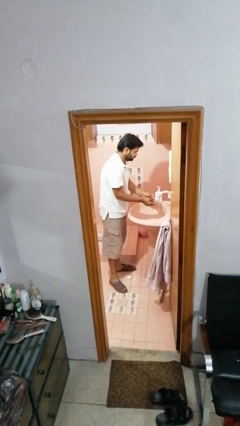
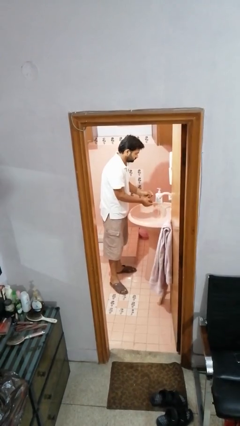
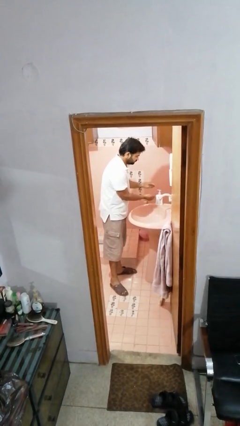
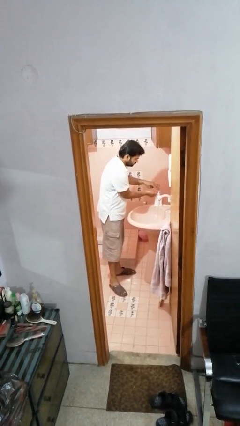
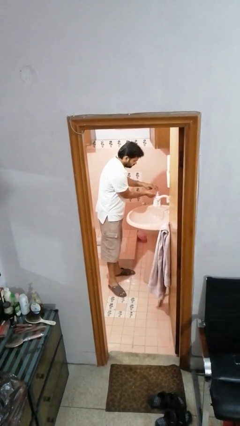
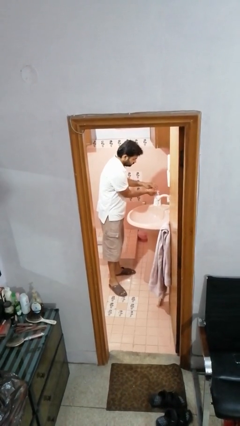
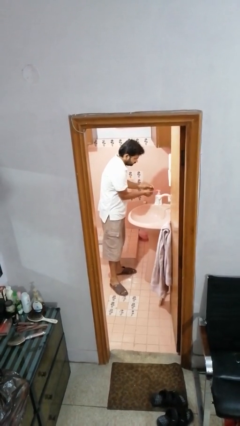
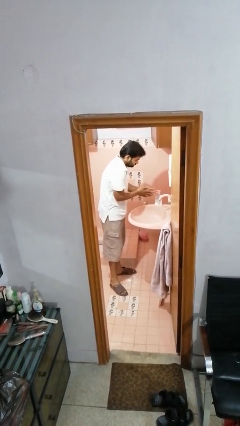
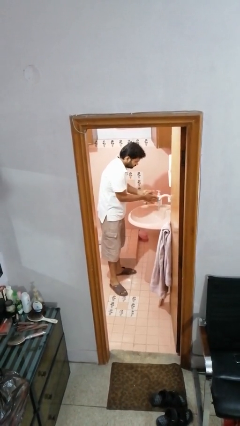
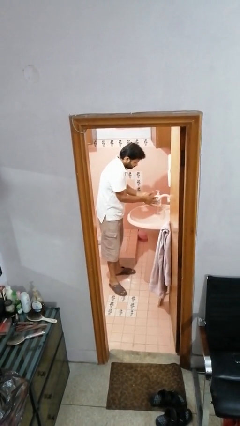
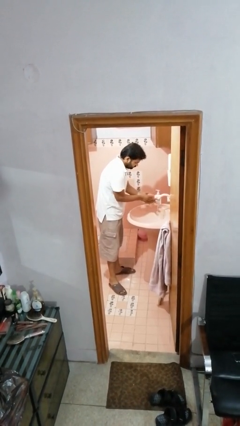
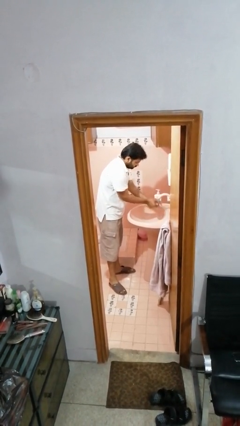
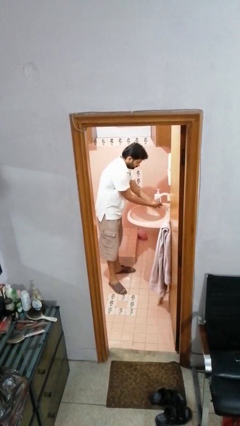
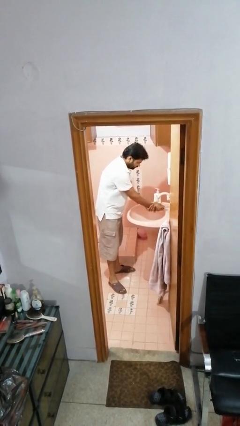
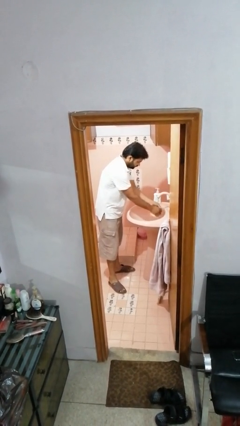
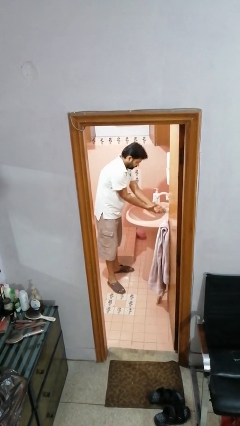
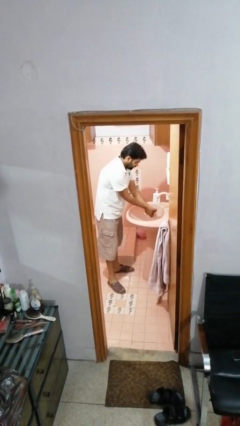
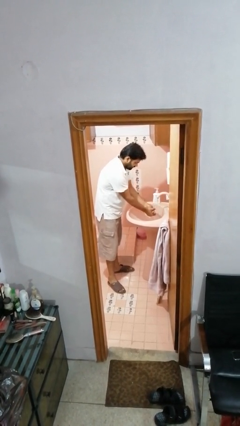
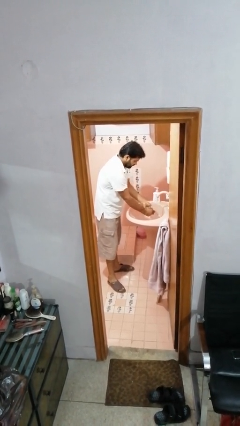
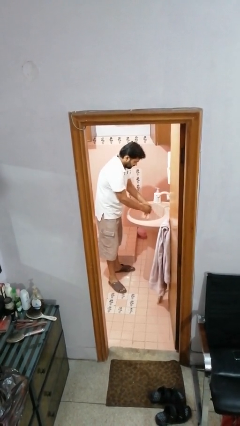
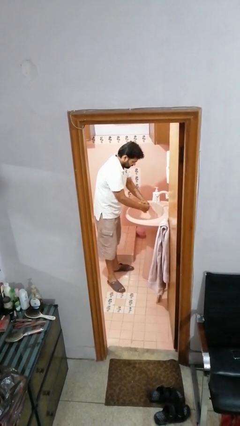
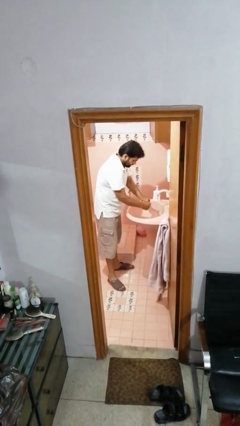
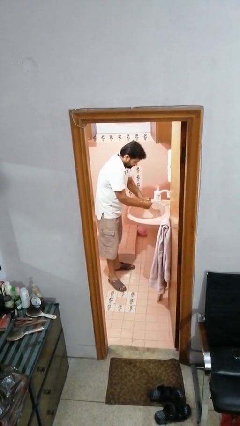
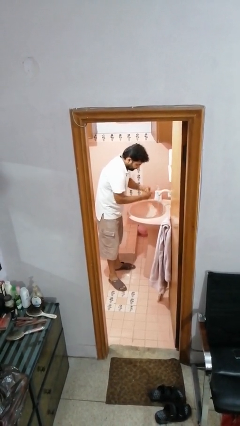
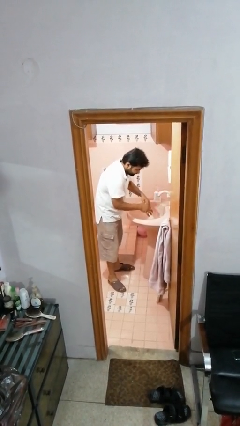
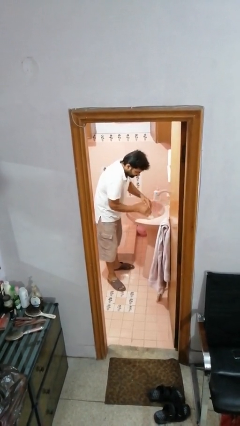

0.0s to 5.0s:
person washes hands

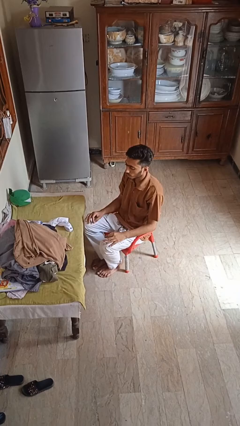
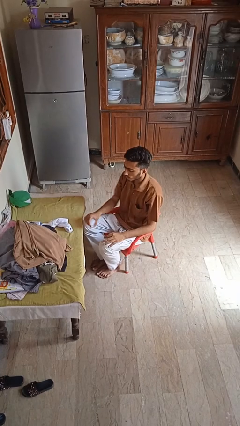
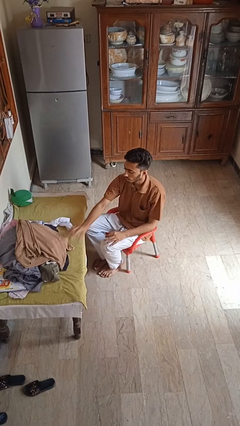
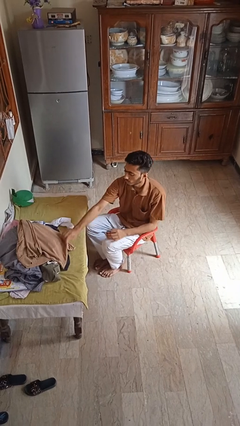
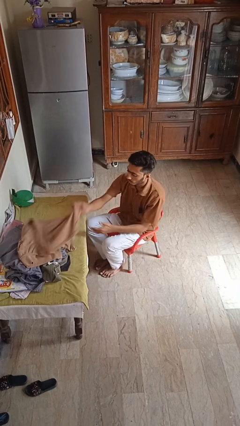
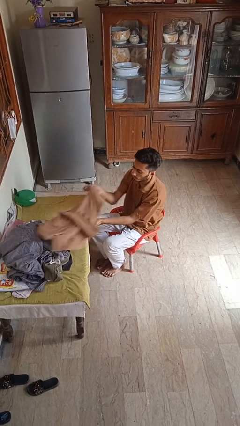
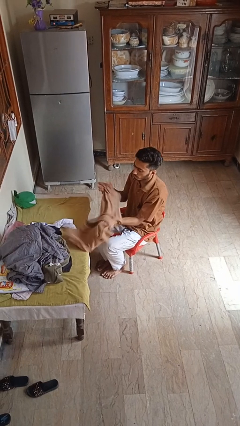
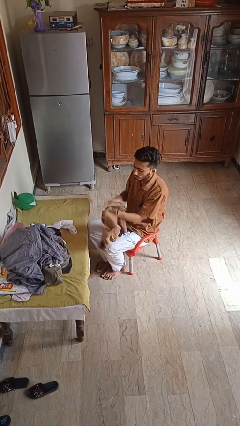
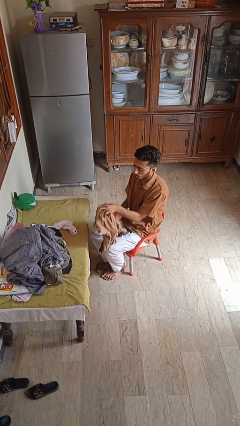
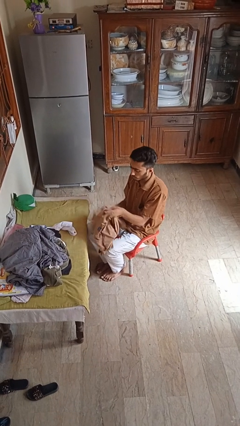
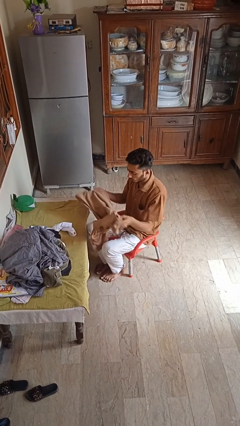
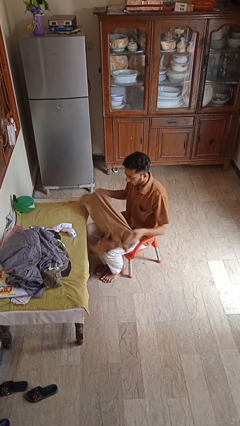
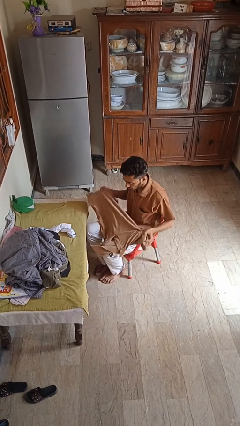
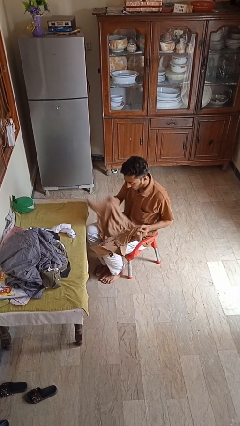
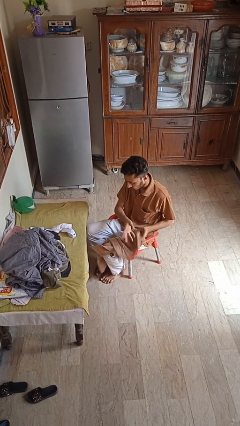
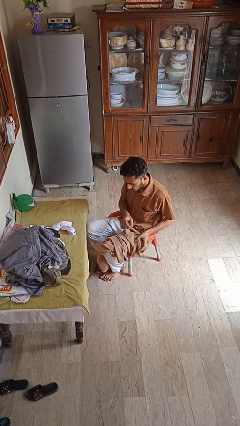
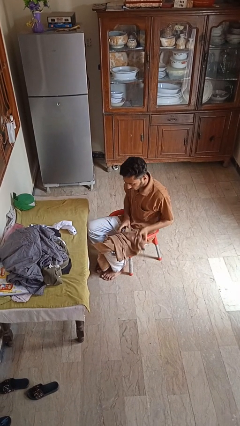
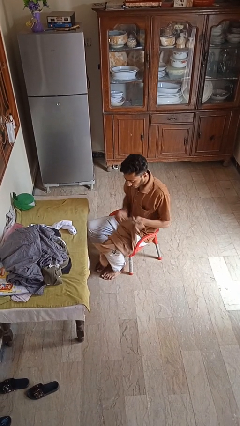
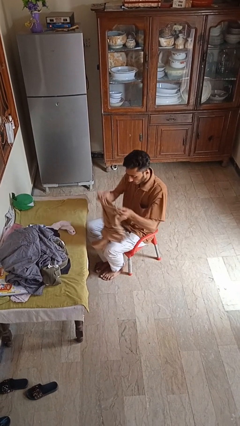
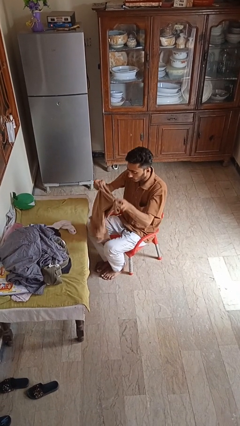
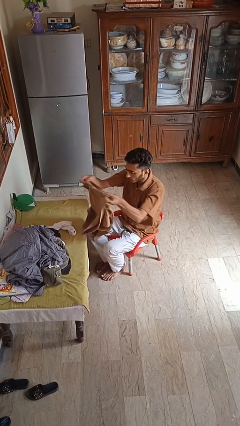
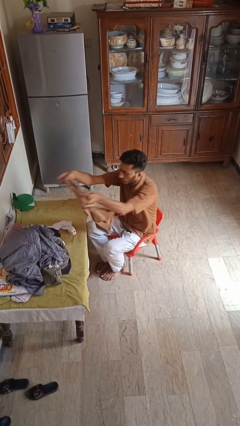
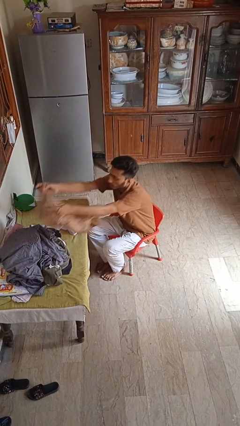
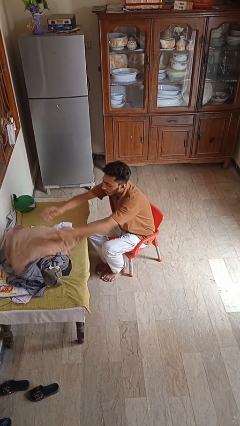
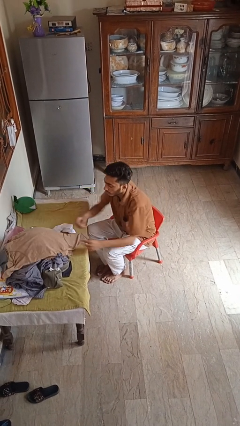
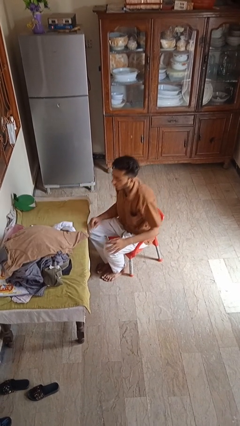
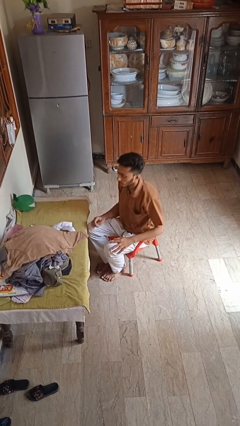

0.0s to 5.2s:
person folds shirt

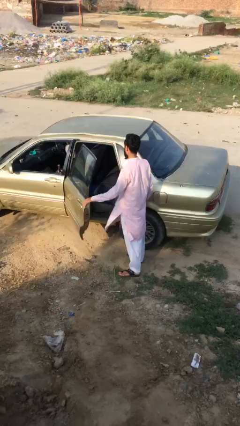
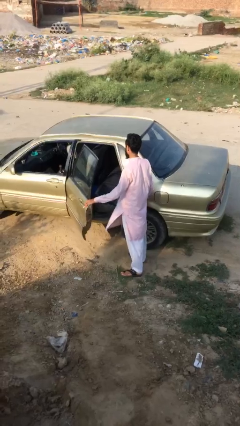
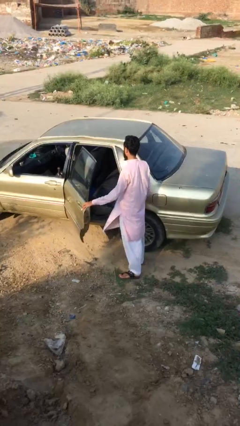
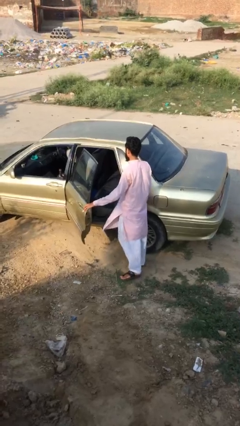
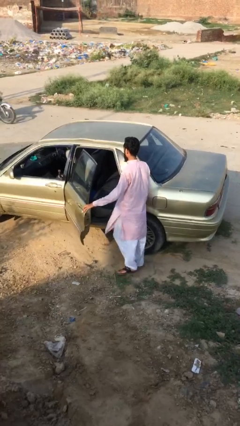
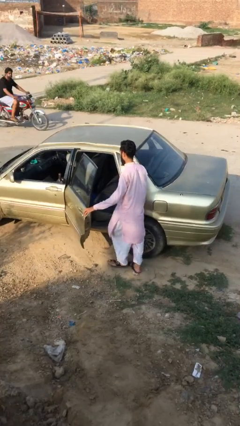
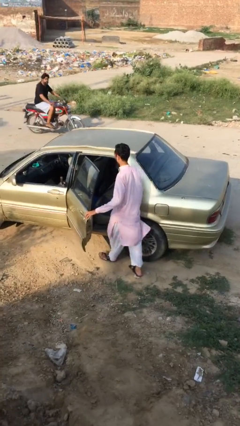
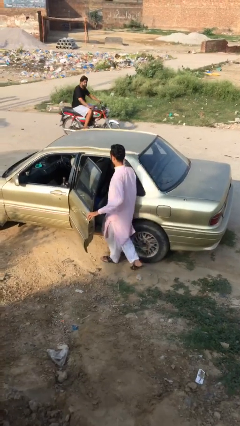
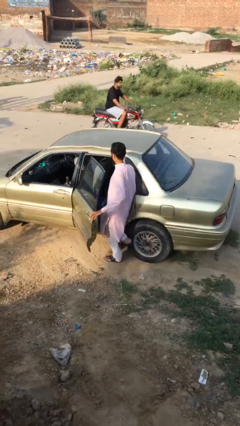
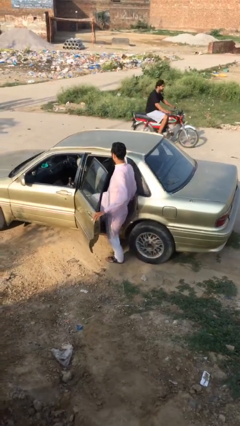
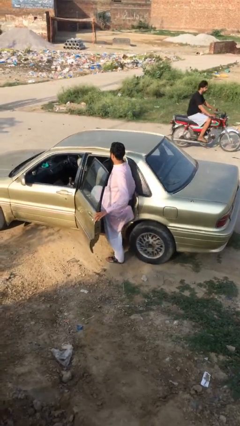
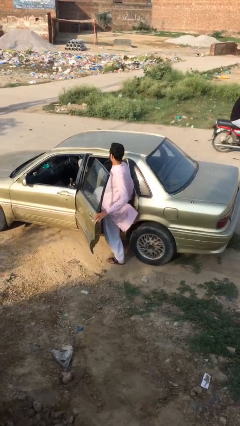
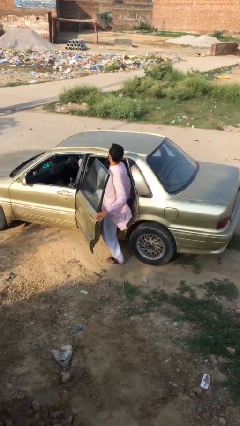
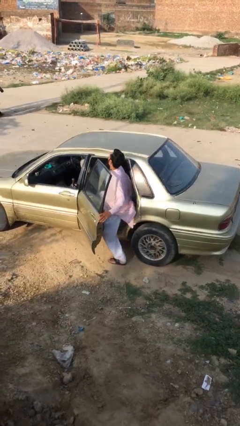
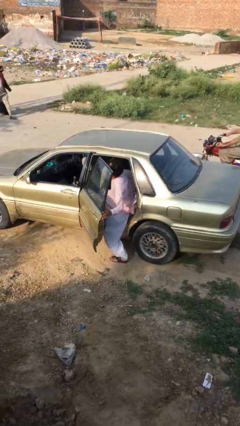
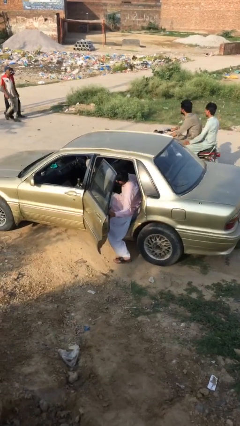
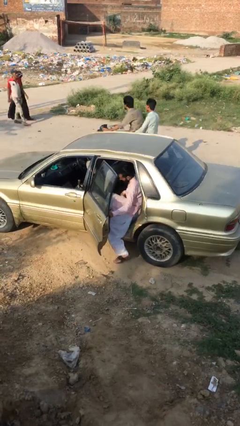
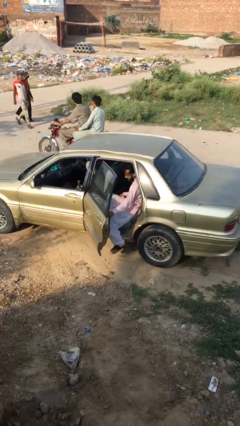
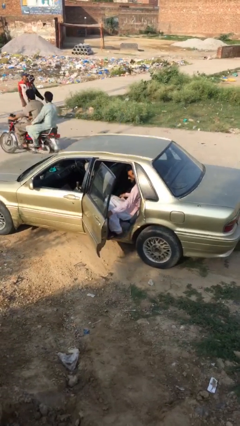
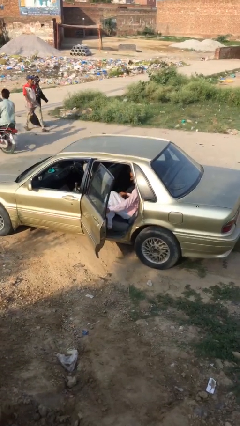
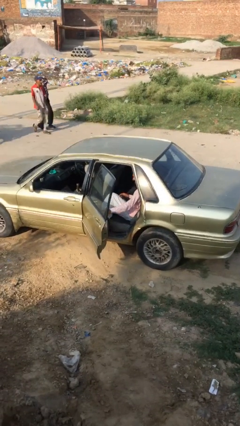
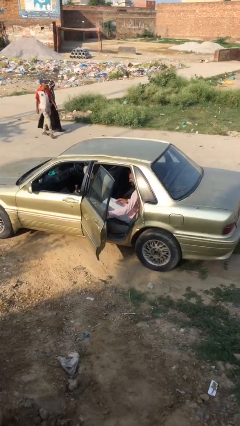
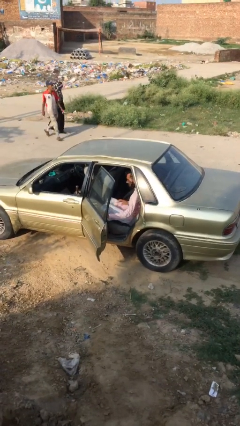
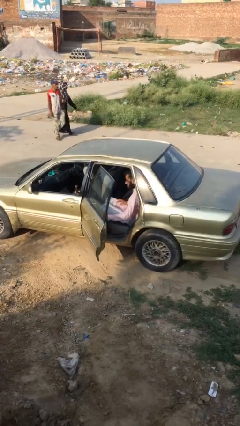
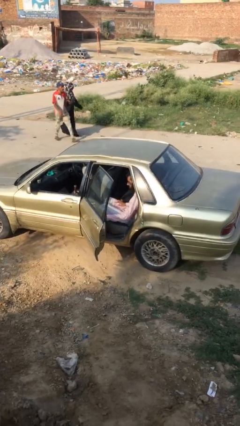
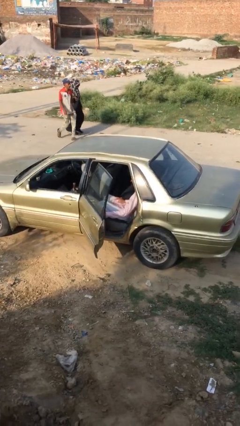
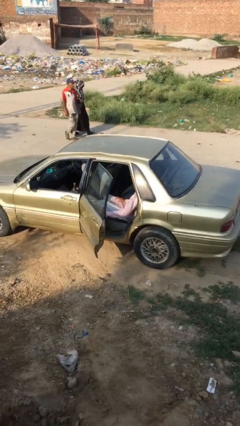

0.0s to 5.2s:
person enters car

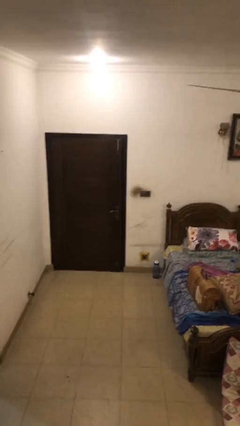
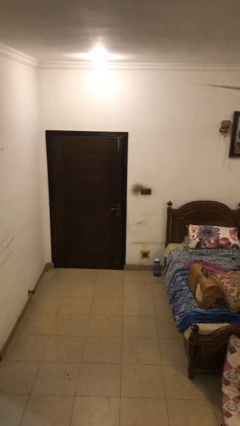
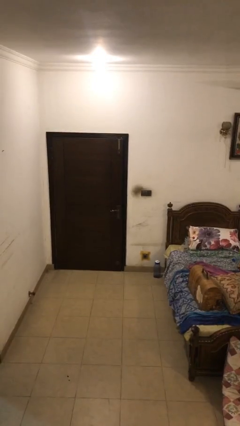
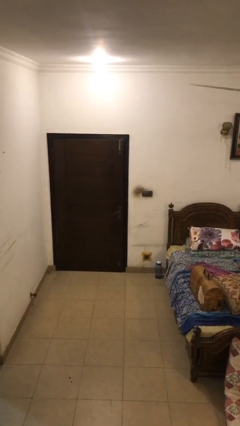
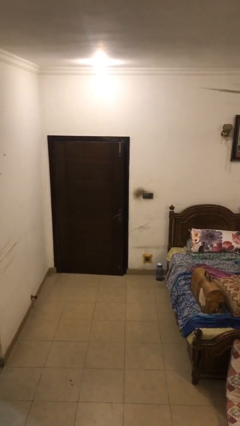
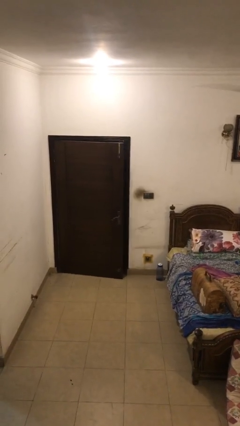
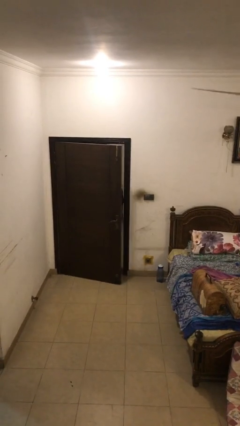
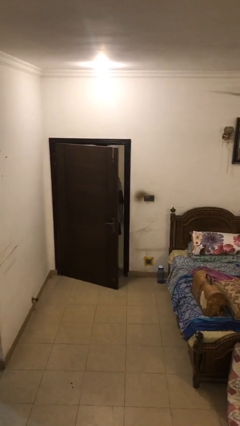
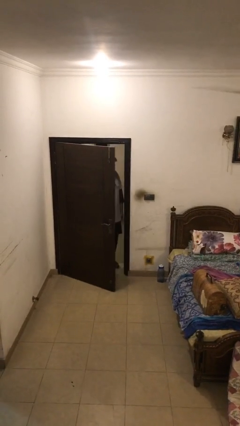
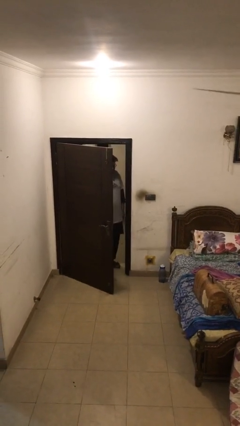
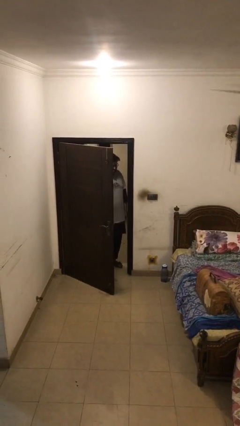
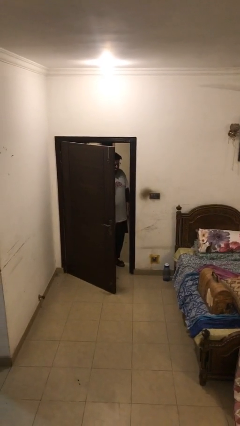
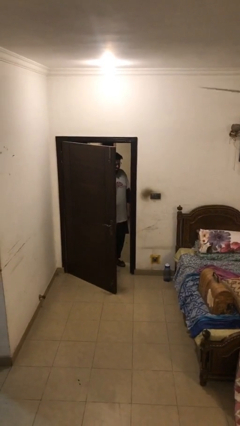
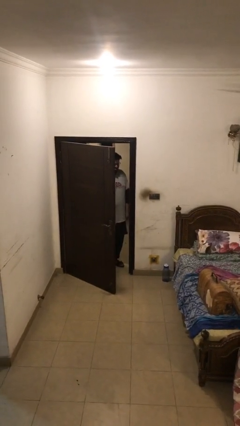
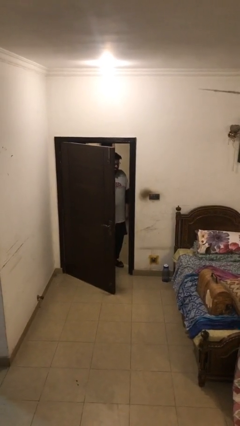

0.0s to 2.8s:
person opens facility door
